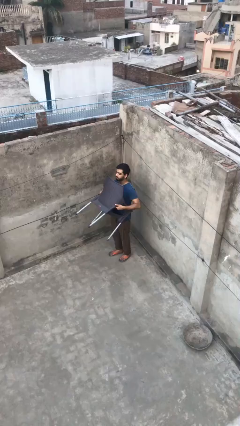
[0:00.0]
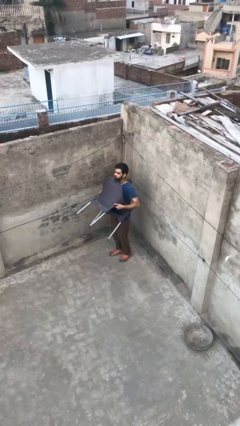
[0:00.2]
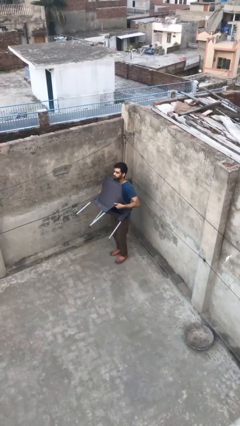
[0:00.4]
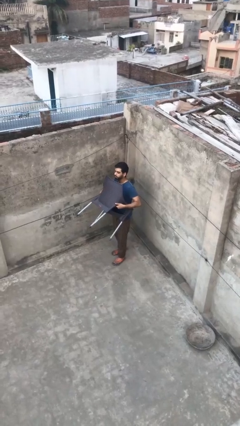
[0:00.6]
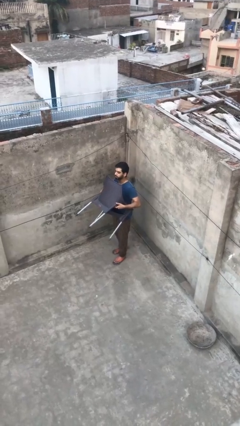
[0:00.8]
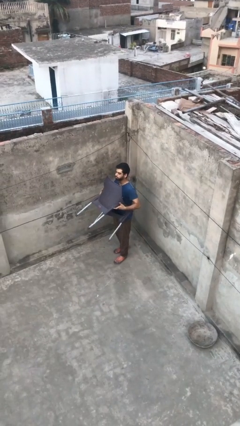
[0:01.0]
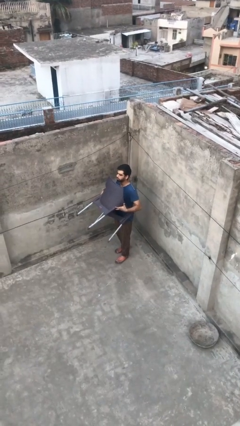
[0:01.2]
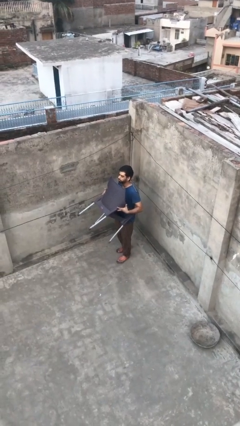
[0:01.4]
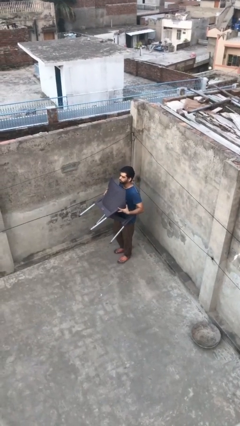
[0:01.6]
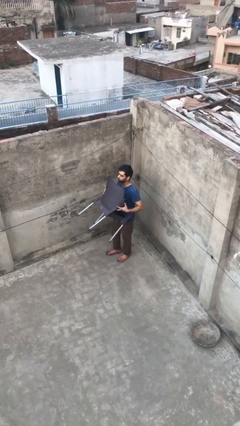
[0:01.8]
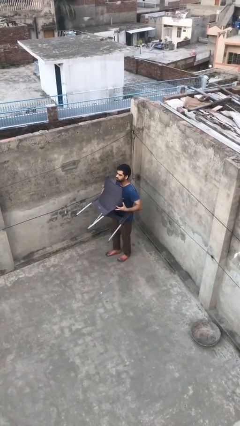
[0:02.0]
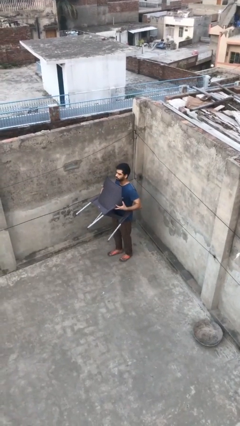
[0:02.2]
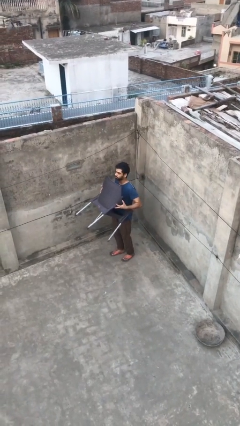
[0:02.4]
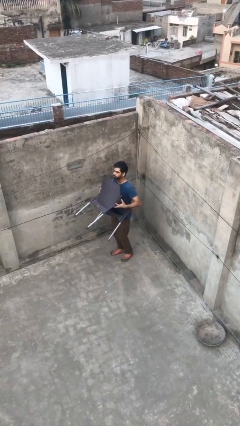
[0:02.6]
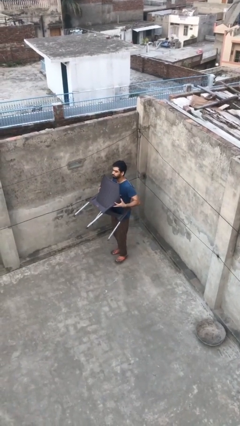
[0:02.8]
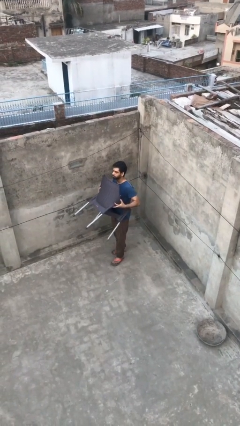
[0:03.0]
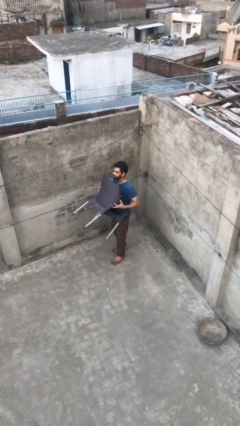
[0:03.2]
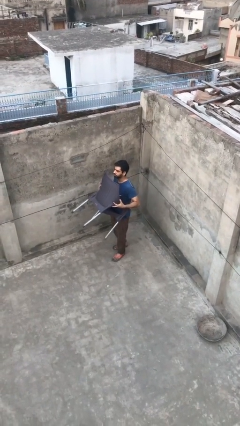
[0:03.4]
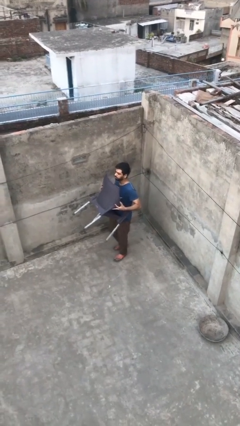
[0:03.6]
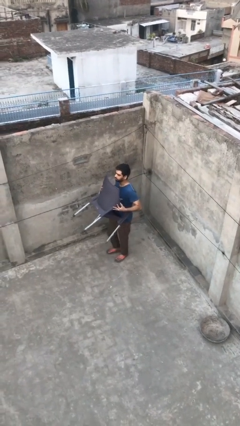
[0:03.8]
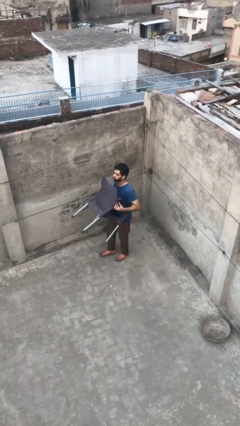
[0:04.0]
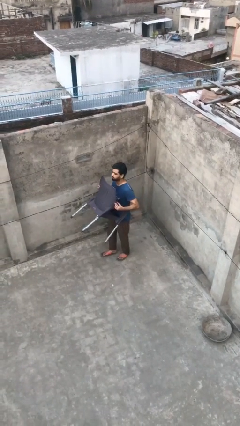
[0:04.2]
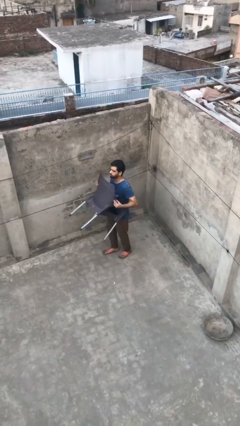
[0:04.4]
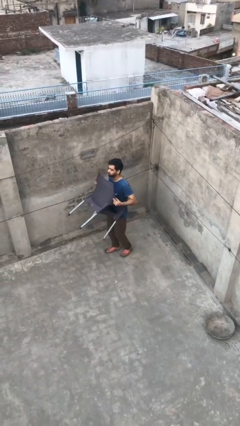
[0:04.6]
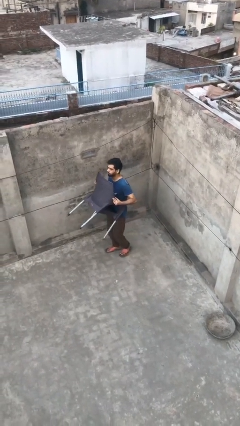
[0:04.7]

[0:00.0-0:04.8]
person carries heavy object

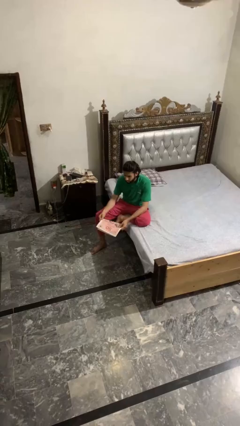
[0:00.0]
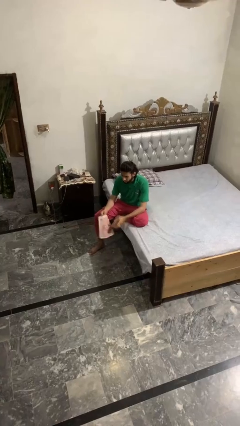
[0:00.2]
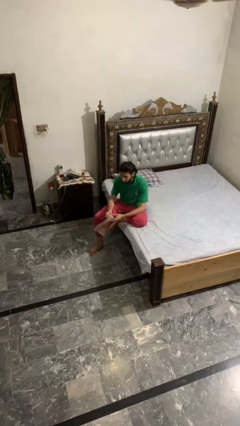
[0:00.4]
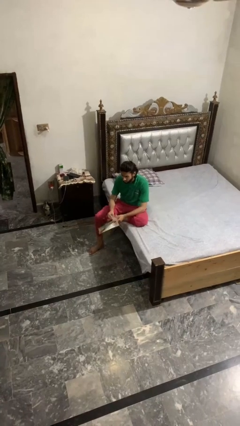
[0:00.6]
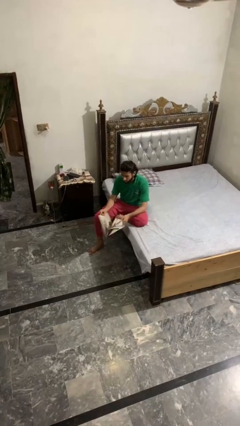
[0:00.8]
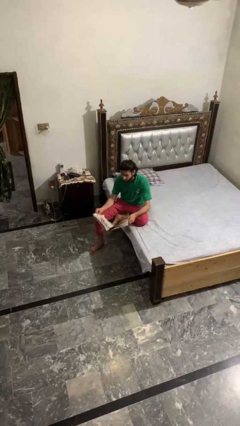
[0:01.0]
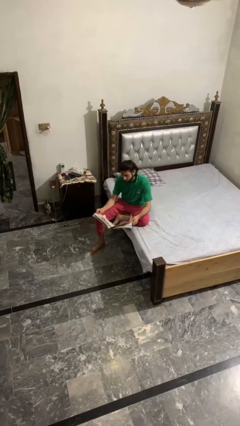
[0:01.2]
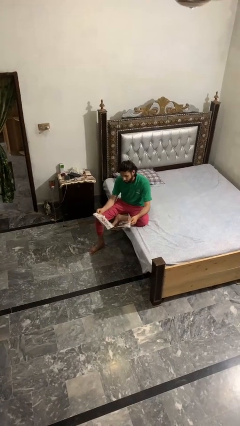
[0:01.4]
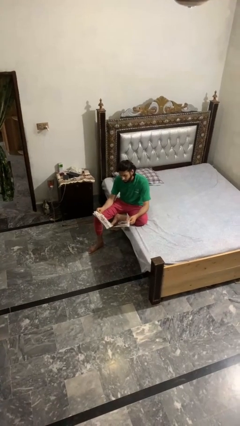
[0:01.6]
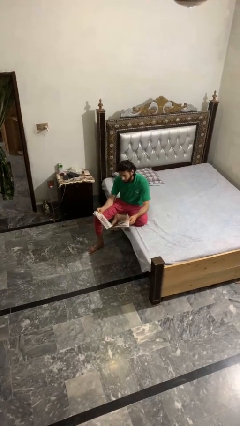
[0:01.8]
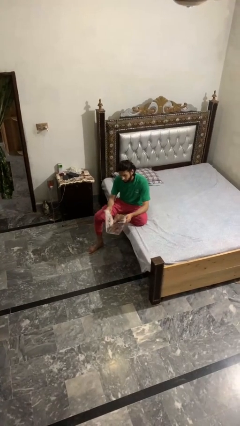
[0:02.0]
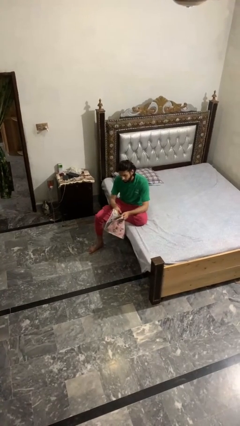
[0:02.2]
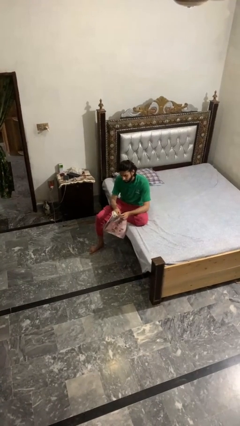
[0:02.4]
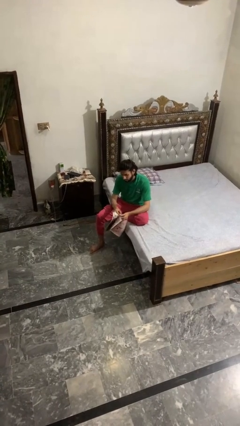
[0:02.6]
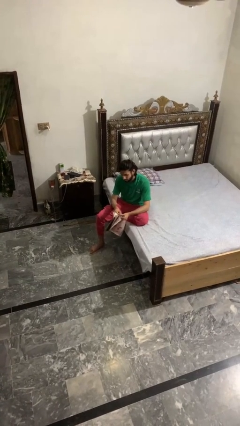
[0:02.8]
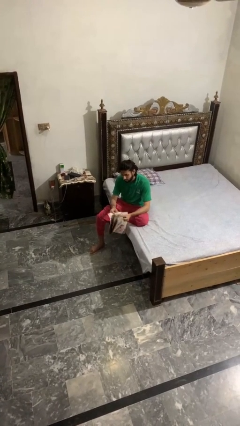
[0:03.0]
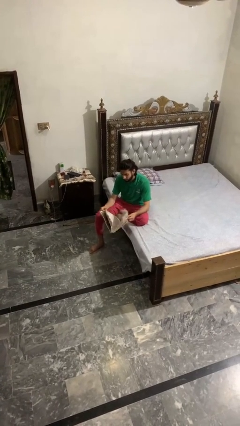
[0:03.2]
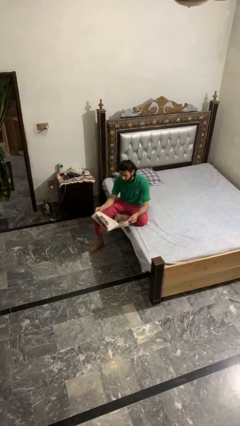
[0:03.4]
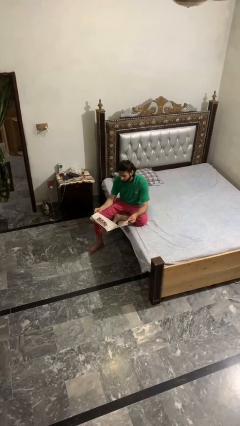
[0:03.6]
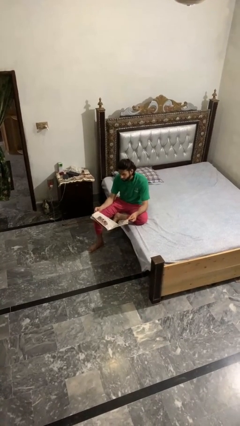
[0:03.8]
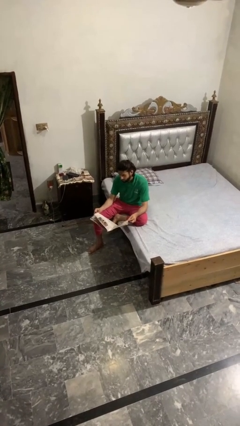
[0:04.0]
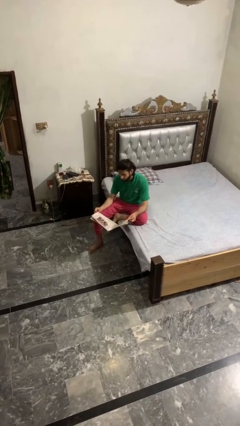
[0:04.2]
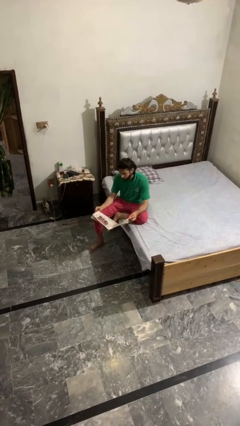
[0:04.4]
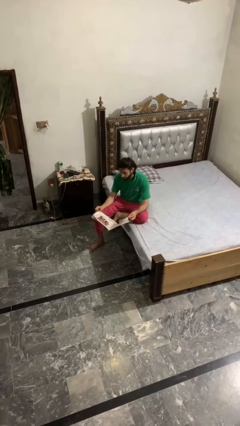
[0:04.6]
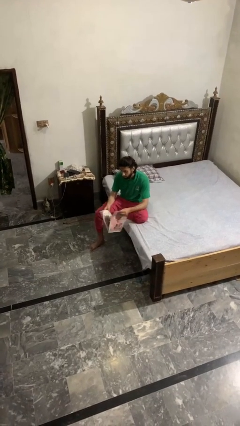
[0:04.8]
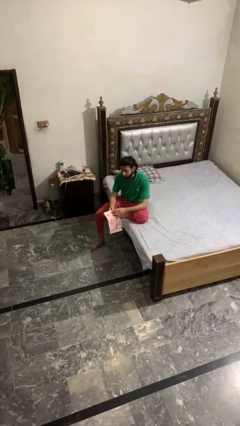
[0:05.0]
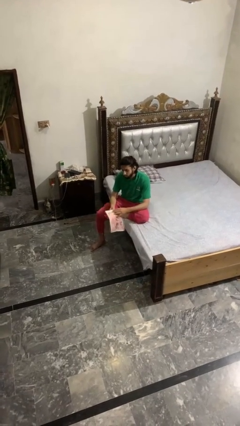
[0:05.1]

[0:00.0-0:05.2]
person reads magazine

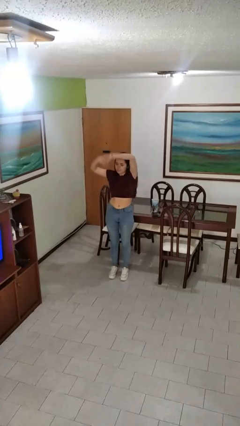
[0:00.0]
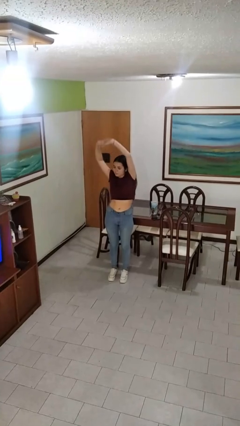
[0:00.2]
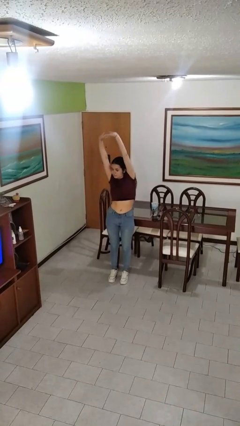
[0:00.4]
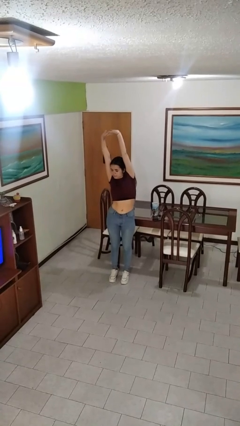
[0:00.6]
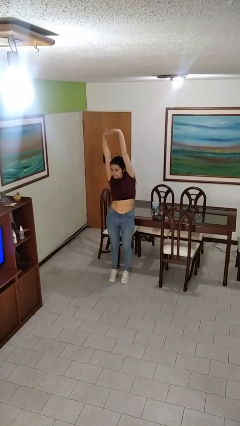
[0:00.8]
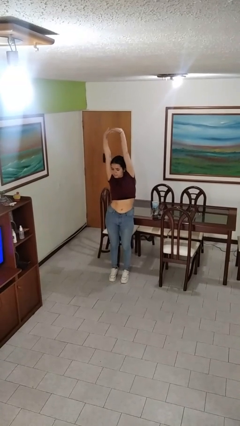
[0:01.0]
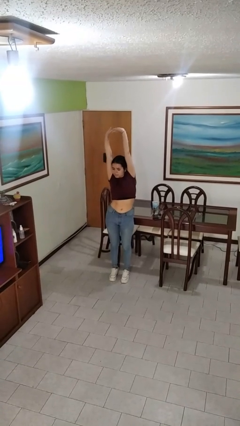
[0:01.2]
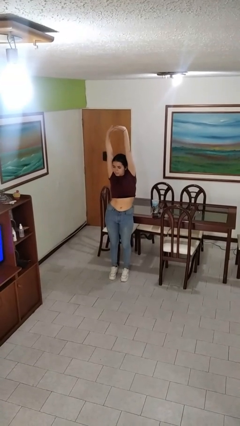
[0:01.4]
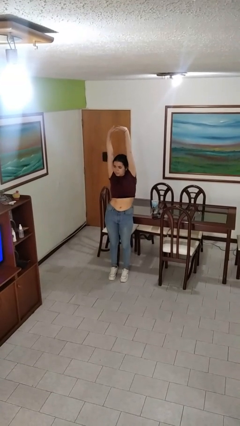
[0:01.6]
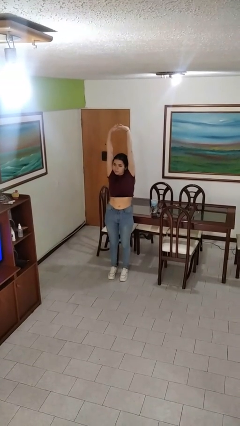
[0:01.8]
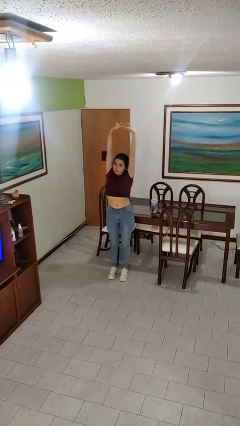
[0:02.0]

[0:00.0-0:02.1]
person stretches arms over head

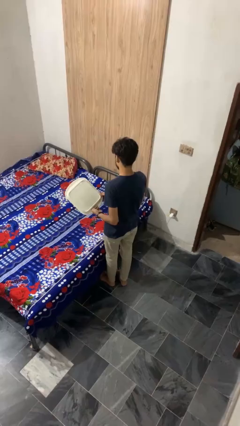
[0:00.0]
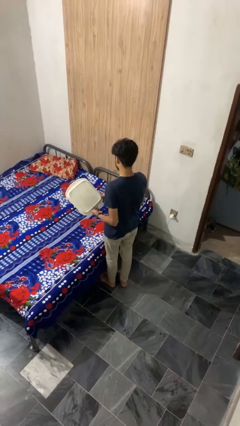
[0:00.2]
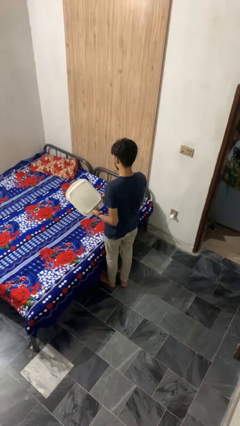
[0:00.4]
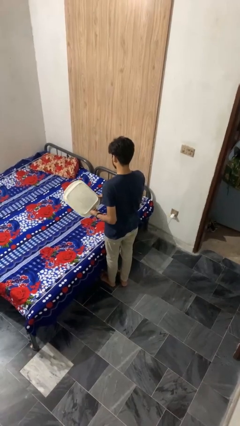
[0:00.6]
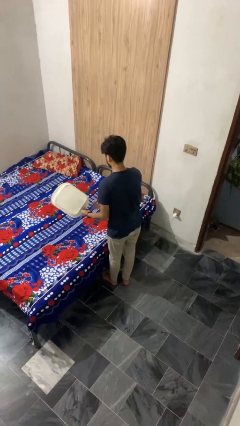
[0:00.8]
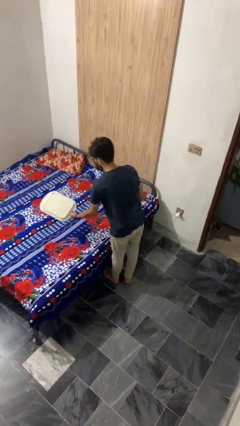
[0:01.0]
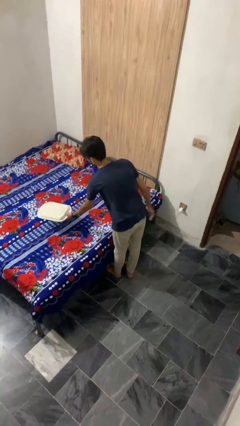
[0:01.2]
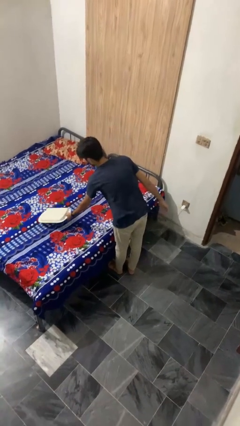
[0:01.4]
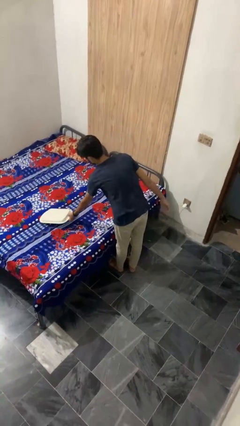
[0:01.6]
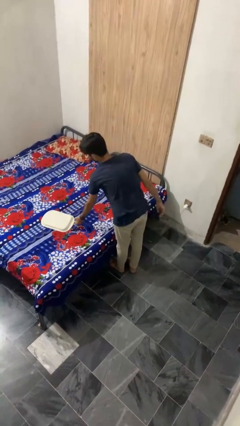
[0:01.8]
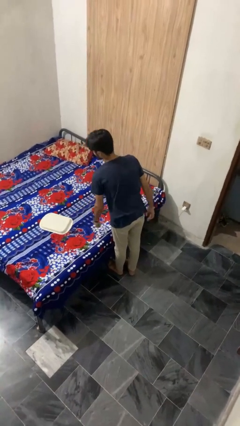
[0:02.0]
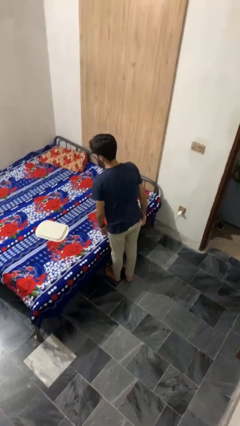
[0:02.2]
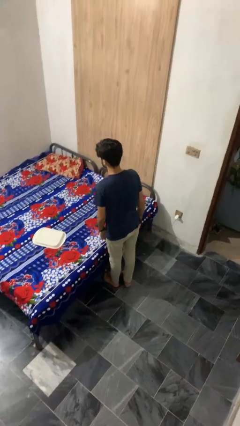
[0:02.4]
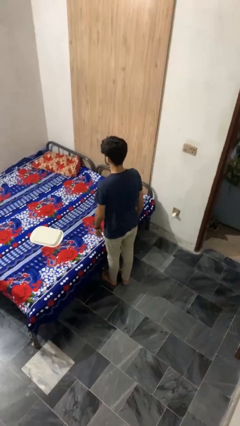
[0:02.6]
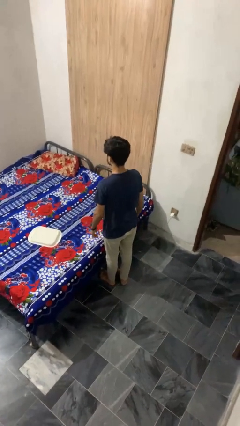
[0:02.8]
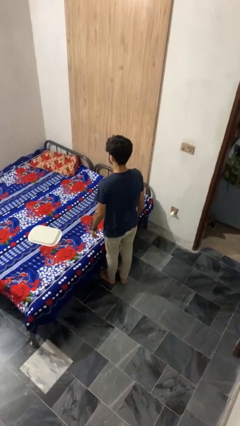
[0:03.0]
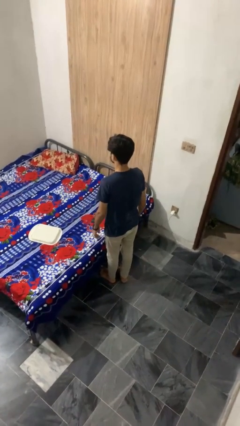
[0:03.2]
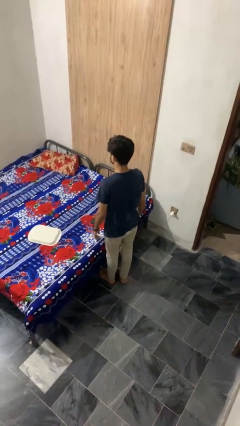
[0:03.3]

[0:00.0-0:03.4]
person puts down object on bed

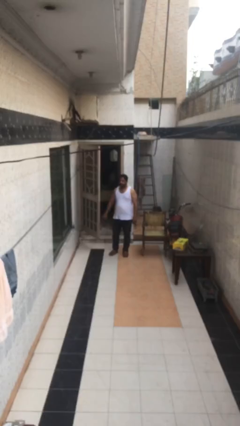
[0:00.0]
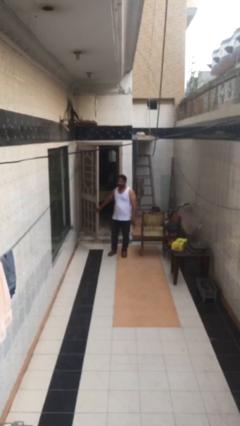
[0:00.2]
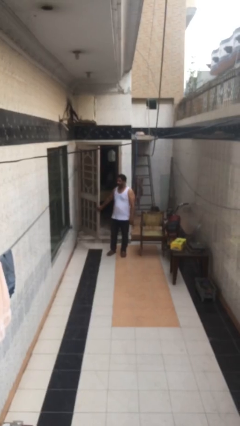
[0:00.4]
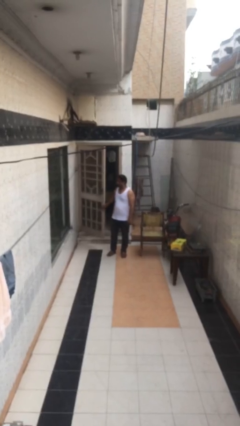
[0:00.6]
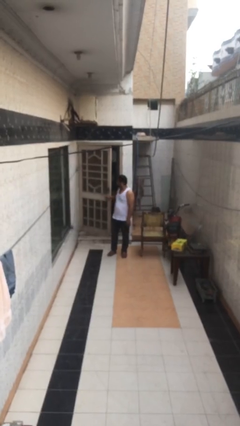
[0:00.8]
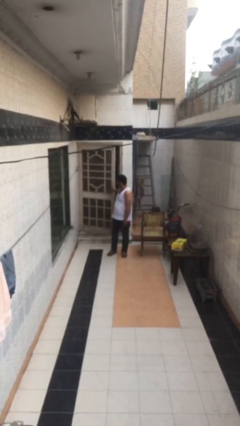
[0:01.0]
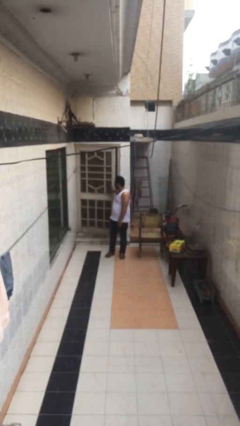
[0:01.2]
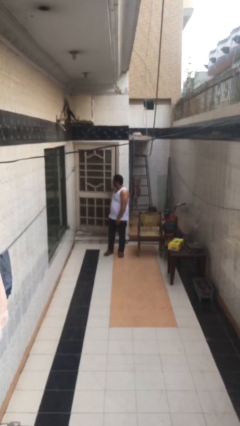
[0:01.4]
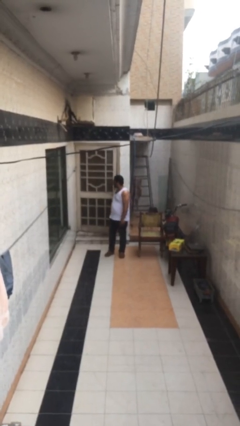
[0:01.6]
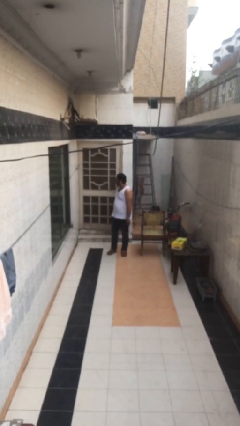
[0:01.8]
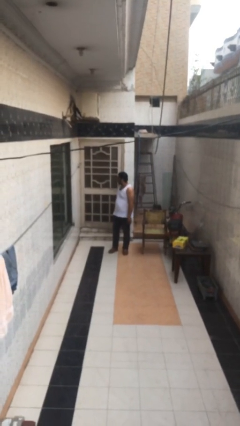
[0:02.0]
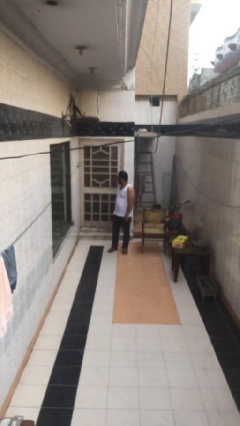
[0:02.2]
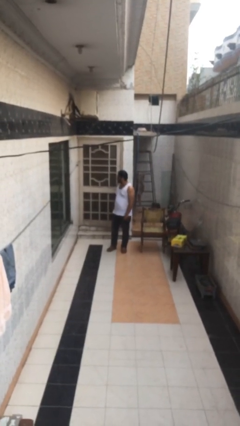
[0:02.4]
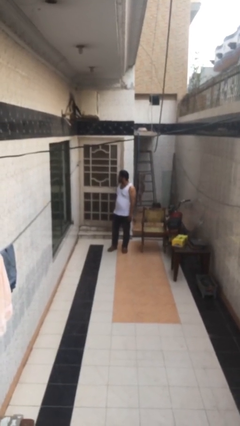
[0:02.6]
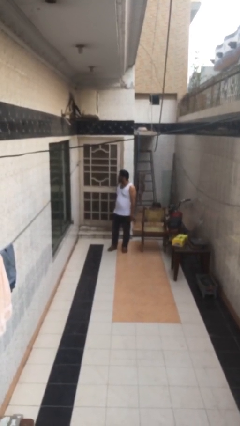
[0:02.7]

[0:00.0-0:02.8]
person closes facility door
